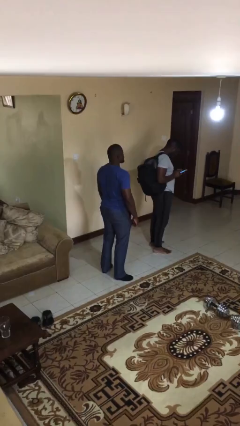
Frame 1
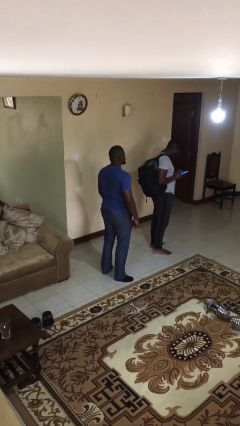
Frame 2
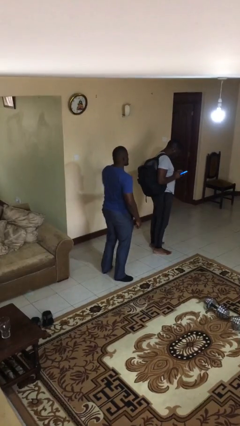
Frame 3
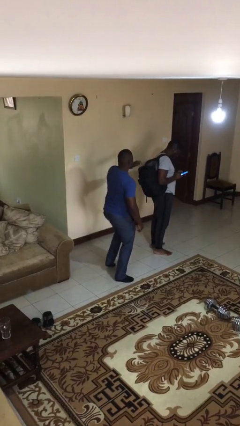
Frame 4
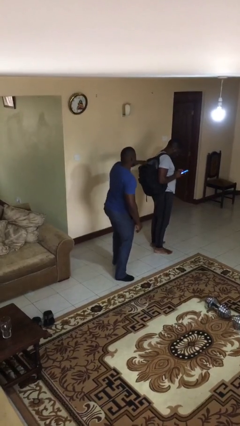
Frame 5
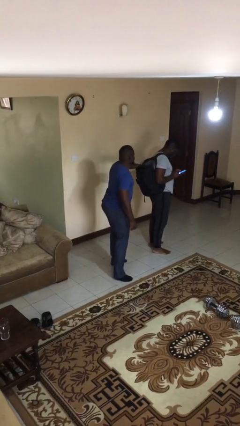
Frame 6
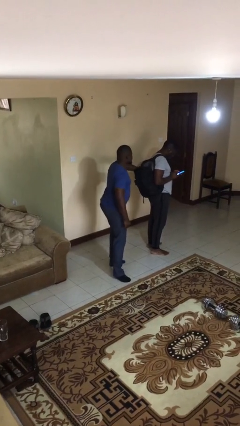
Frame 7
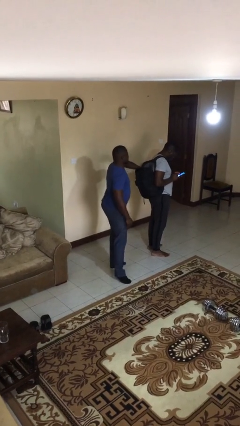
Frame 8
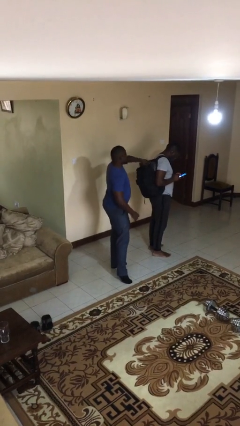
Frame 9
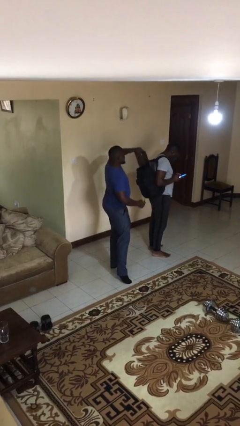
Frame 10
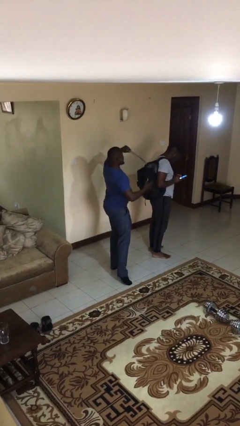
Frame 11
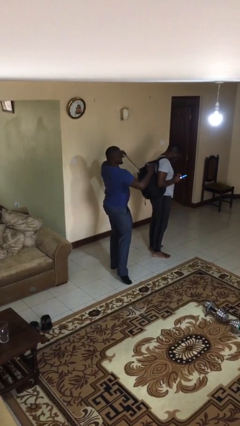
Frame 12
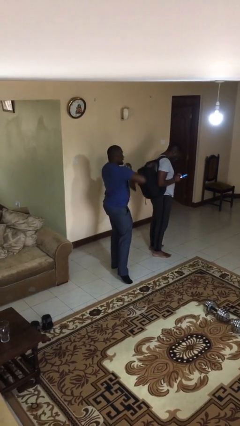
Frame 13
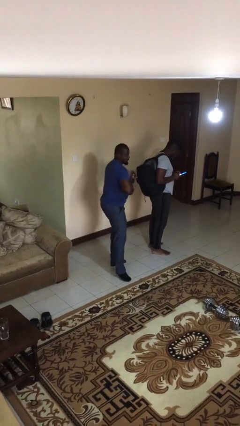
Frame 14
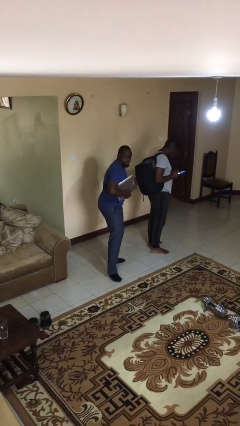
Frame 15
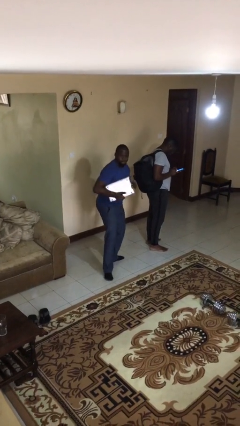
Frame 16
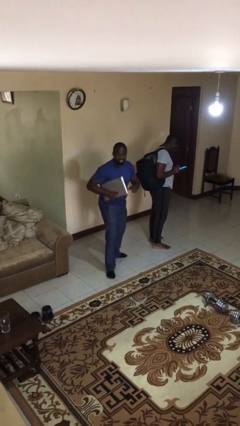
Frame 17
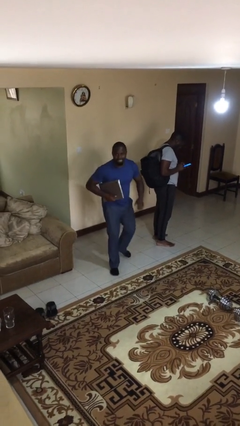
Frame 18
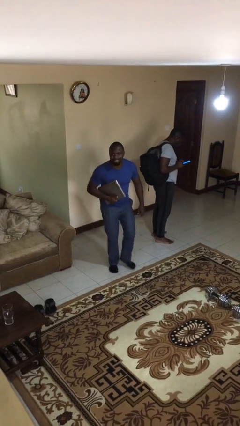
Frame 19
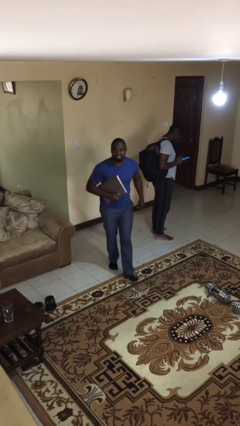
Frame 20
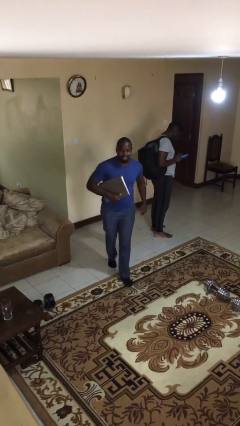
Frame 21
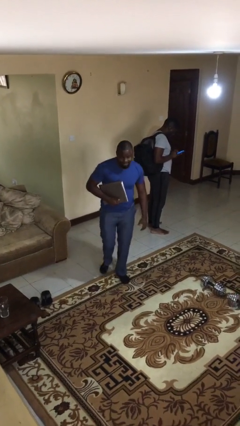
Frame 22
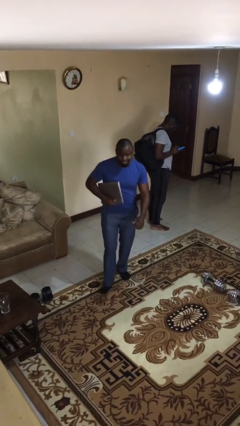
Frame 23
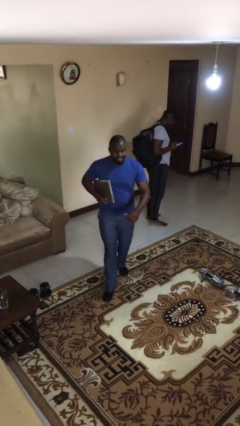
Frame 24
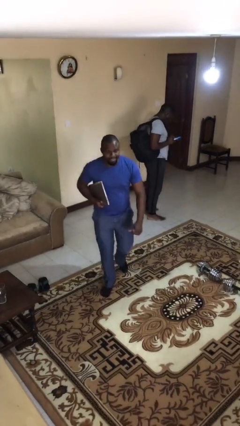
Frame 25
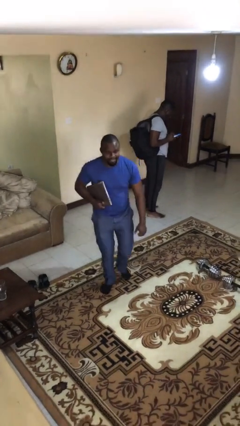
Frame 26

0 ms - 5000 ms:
person steals object from person

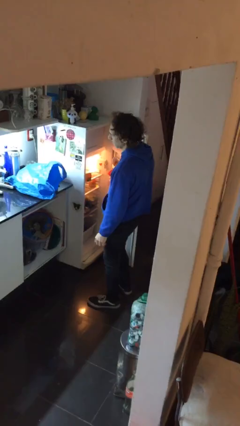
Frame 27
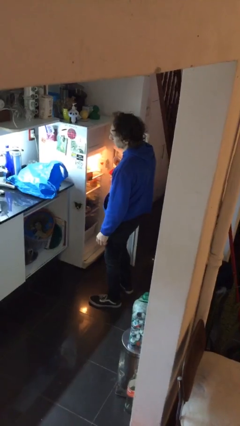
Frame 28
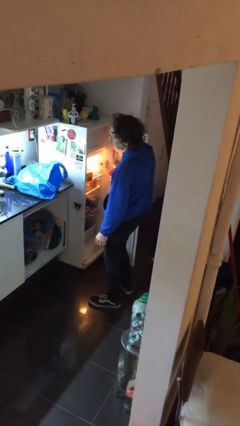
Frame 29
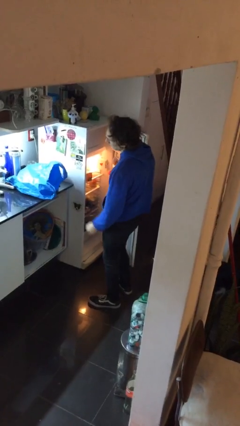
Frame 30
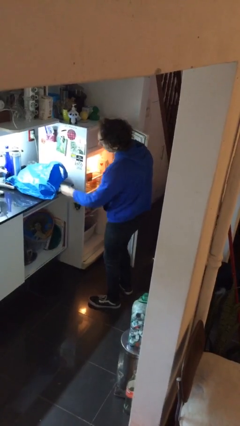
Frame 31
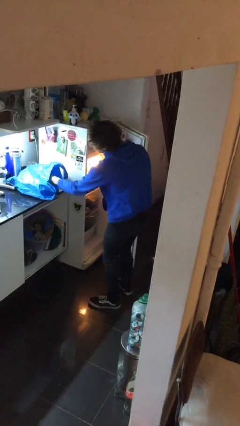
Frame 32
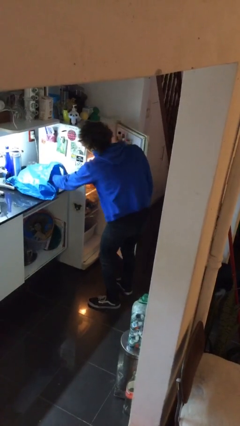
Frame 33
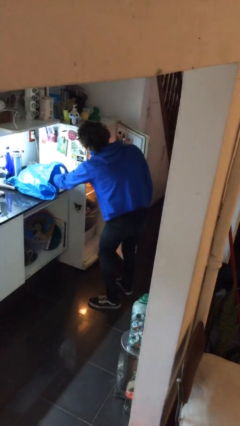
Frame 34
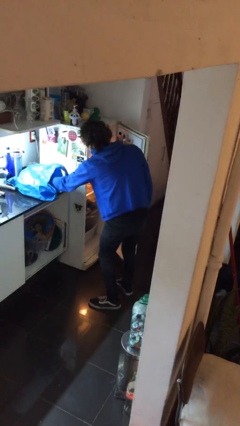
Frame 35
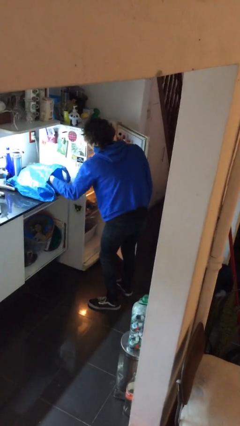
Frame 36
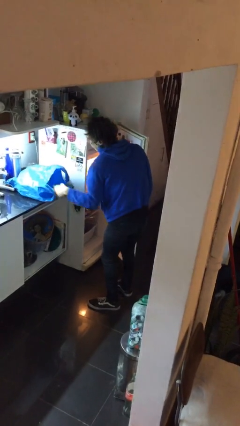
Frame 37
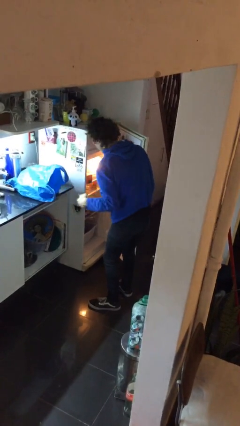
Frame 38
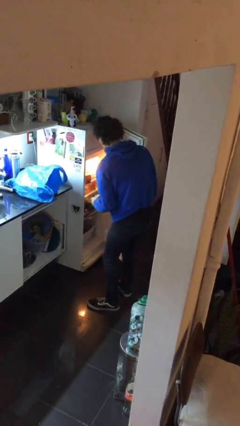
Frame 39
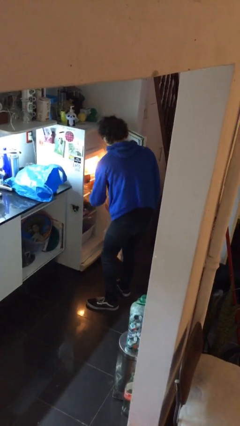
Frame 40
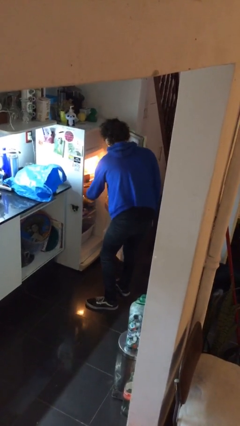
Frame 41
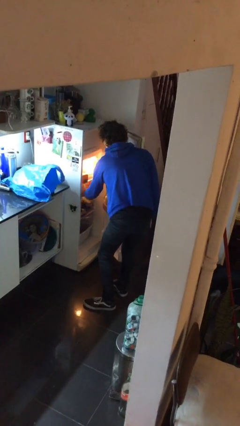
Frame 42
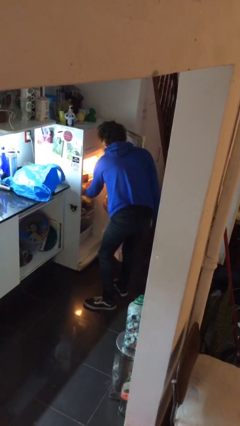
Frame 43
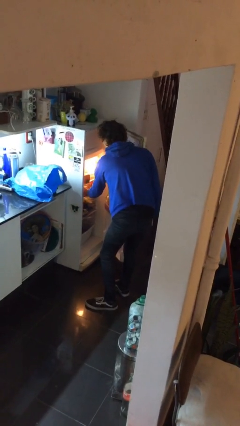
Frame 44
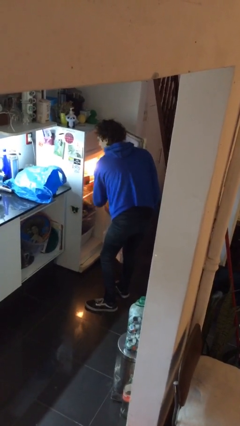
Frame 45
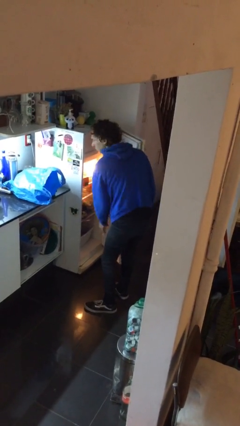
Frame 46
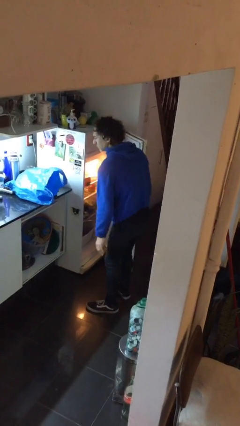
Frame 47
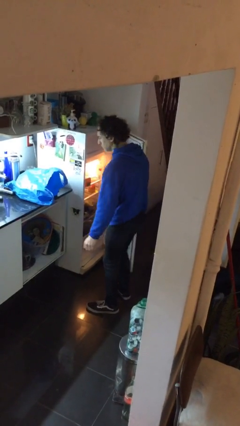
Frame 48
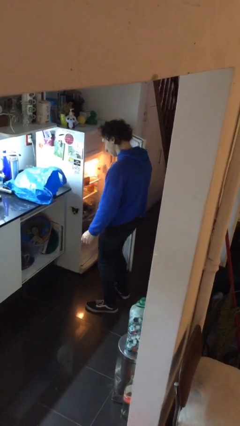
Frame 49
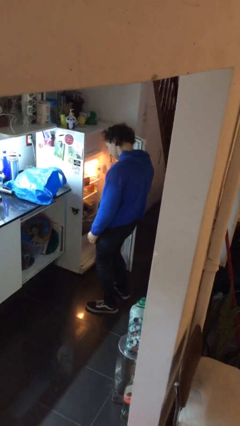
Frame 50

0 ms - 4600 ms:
person loads groceries into refrigerator

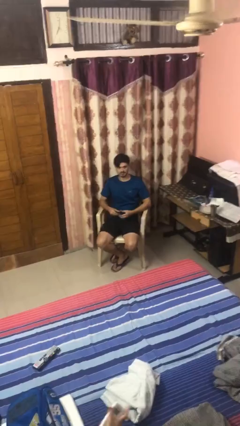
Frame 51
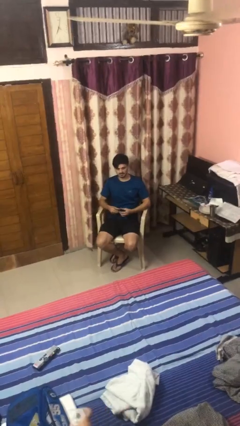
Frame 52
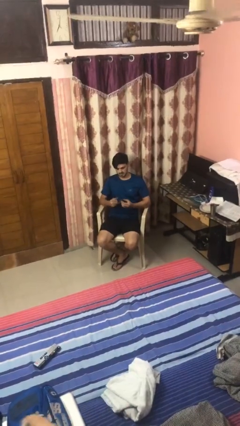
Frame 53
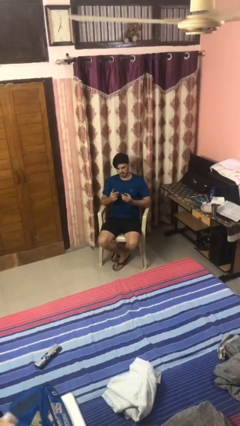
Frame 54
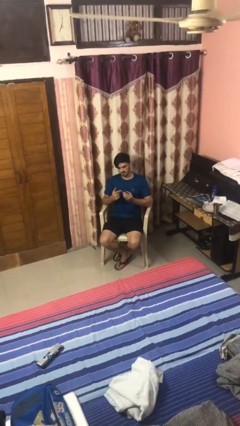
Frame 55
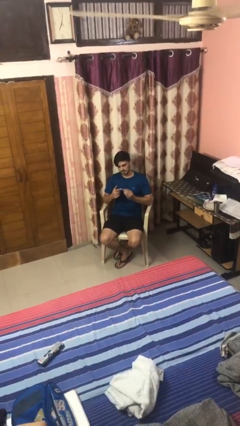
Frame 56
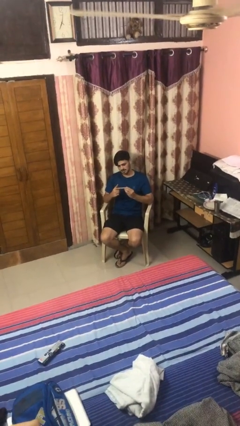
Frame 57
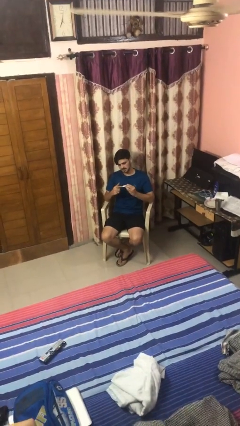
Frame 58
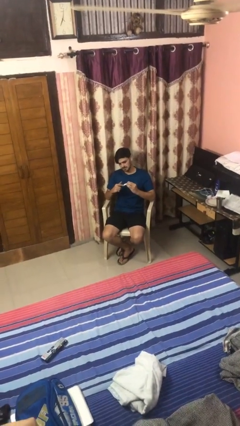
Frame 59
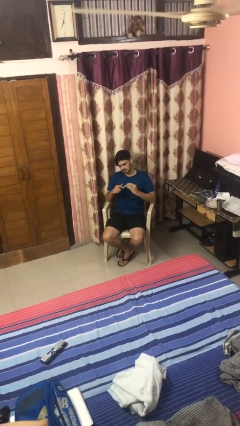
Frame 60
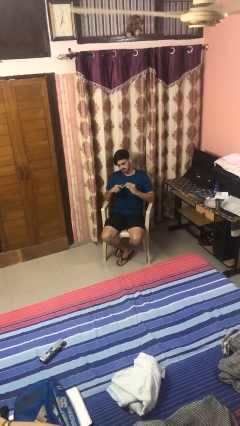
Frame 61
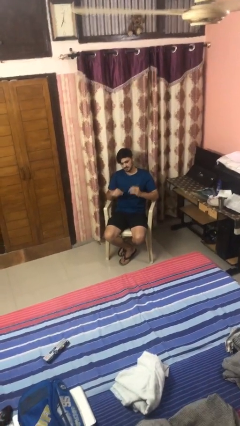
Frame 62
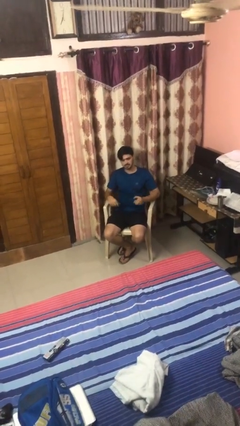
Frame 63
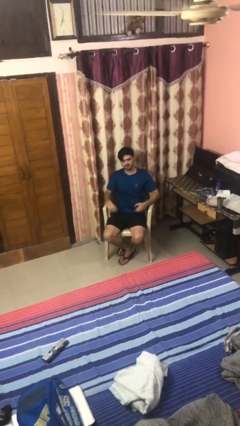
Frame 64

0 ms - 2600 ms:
person clips fingernails

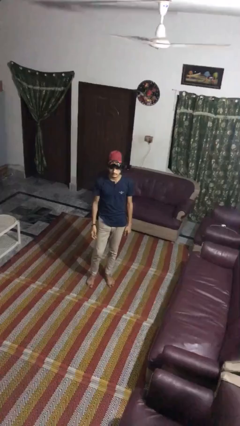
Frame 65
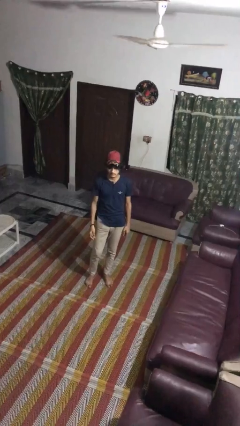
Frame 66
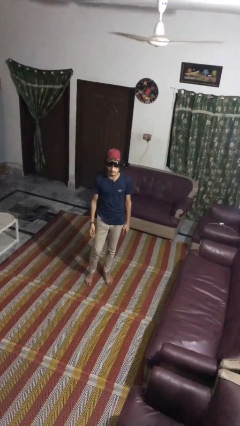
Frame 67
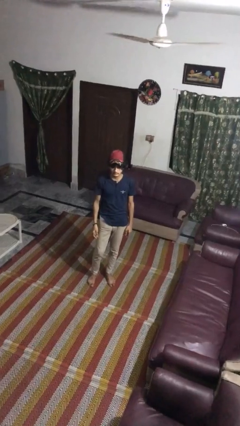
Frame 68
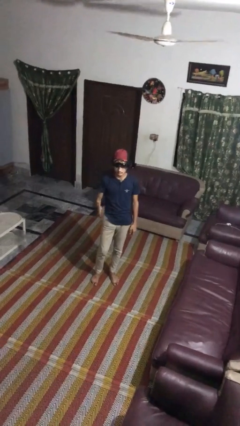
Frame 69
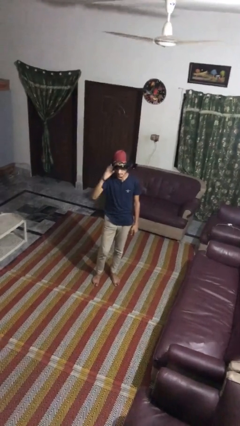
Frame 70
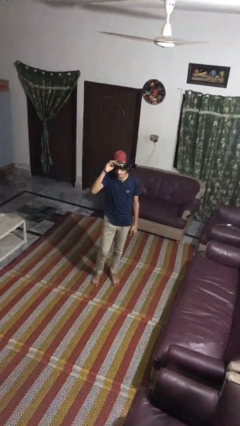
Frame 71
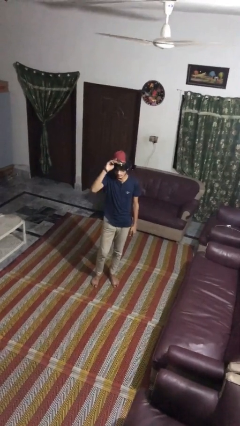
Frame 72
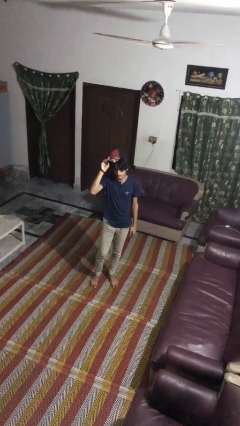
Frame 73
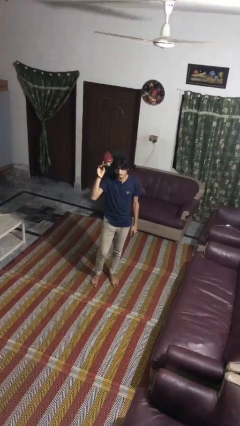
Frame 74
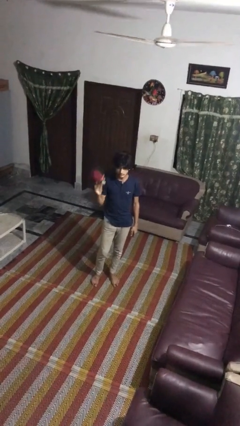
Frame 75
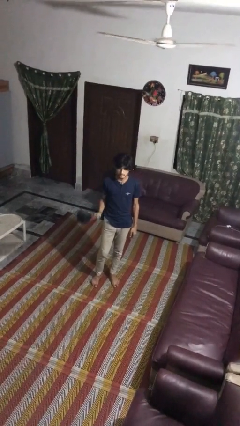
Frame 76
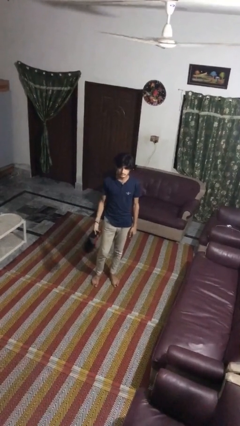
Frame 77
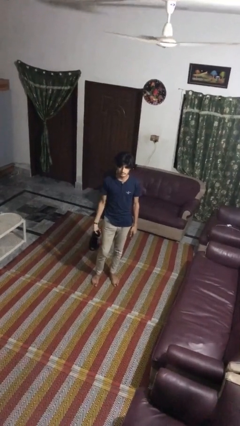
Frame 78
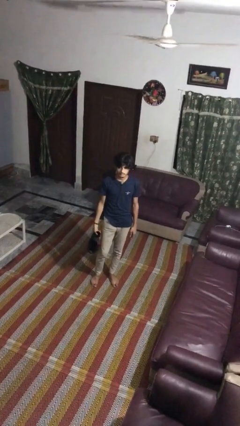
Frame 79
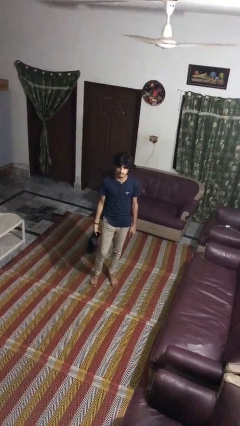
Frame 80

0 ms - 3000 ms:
person takes off hat

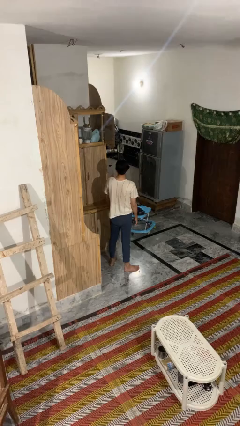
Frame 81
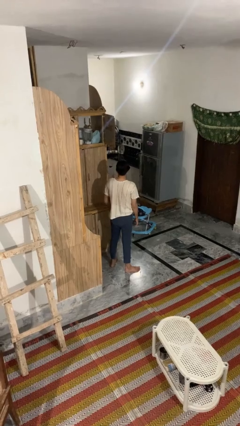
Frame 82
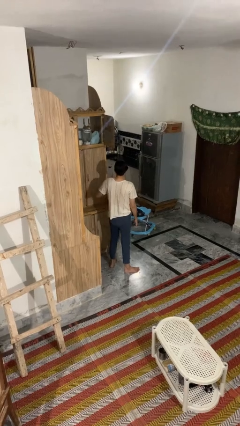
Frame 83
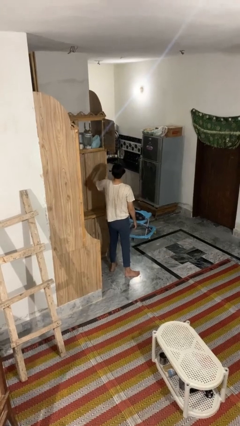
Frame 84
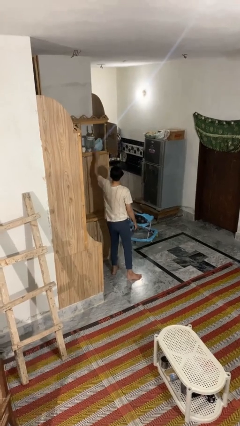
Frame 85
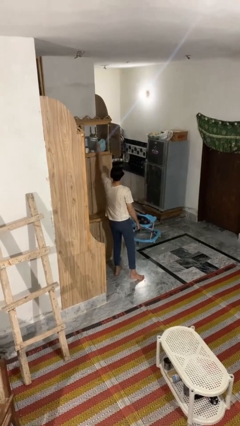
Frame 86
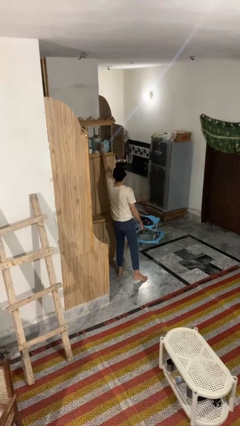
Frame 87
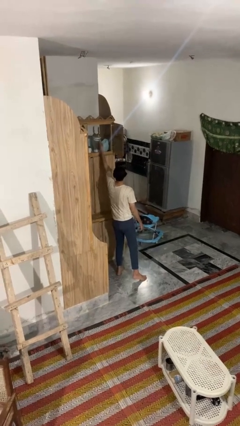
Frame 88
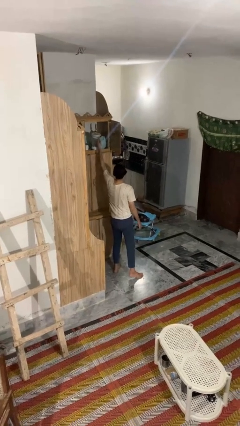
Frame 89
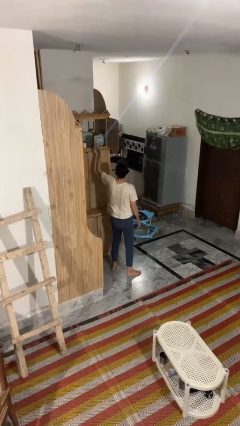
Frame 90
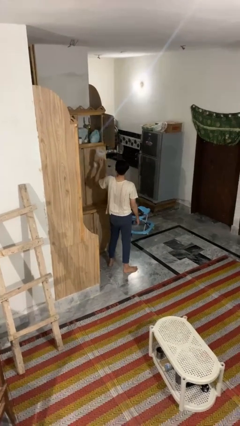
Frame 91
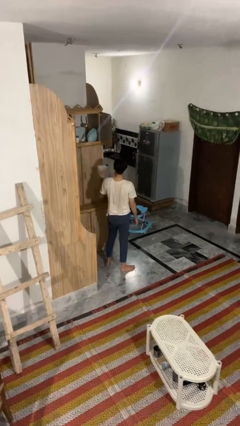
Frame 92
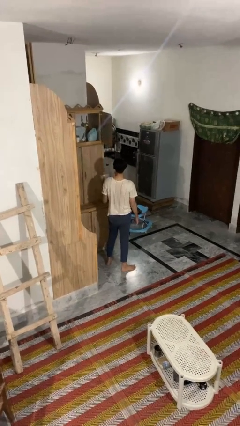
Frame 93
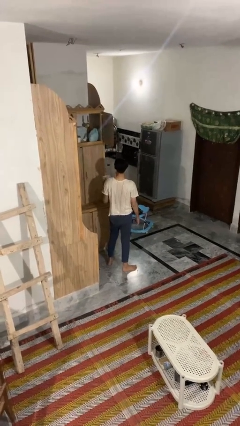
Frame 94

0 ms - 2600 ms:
person picks up object from shelf
